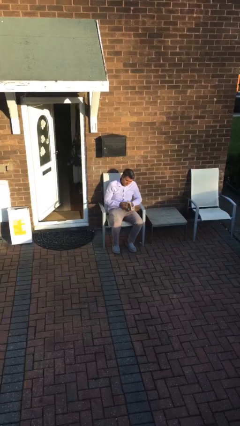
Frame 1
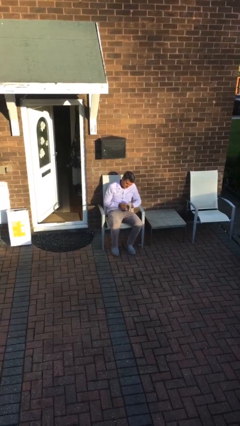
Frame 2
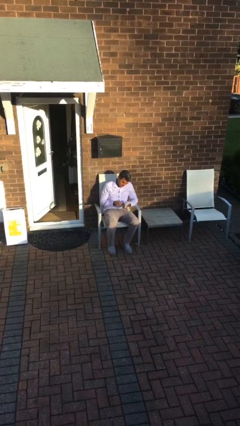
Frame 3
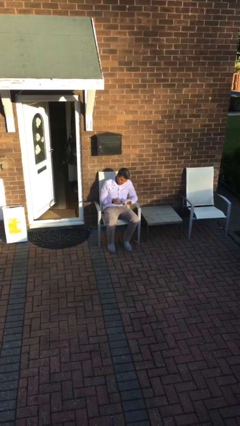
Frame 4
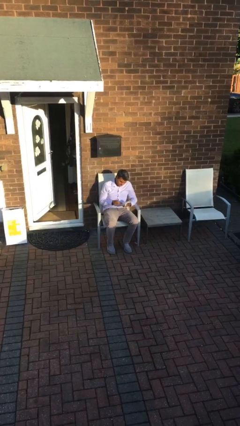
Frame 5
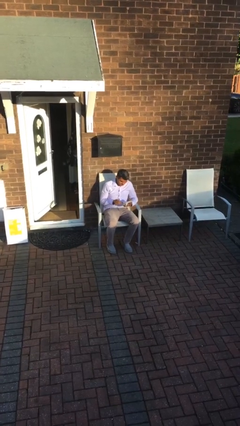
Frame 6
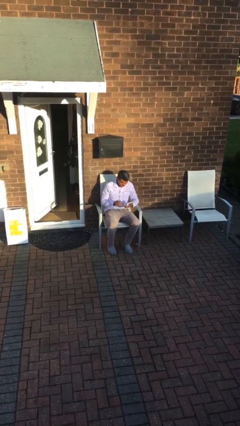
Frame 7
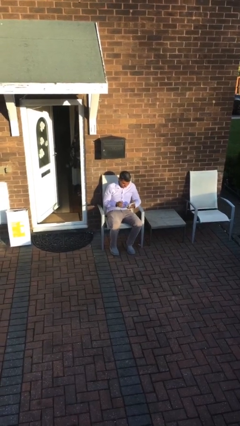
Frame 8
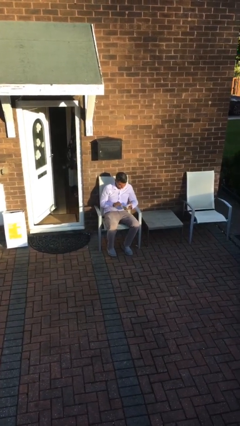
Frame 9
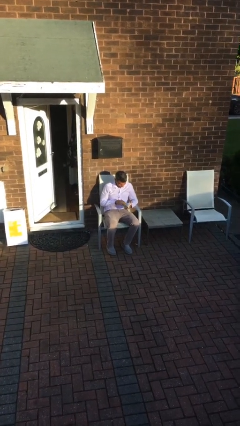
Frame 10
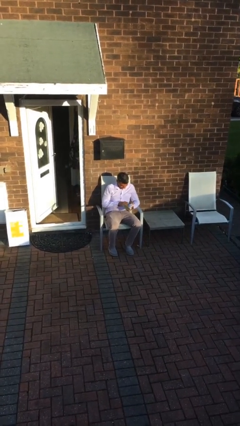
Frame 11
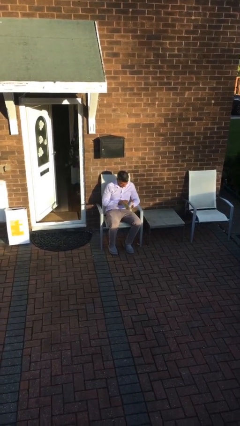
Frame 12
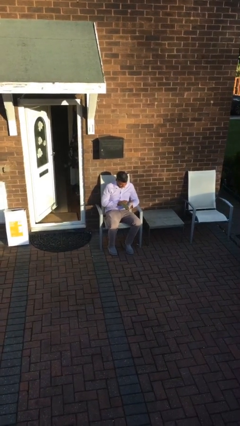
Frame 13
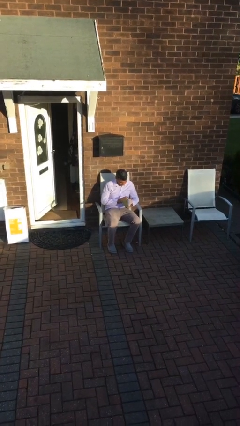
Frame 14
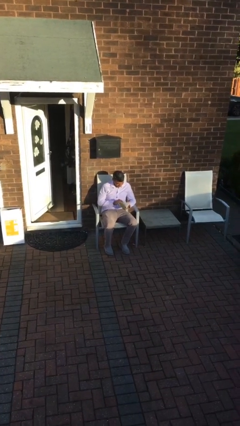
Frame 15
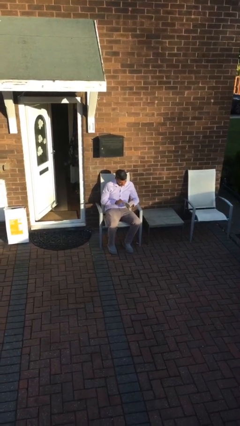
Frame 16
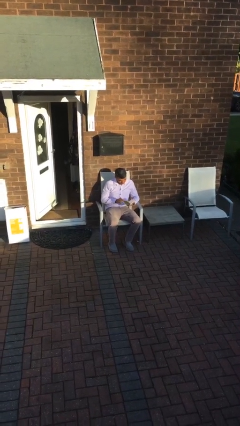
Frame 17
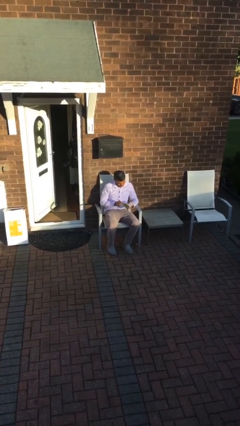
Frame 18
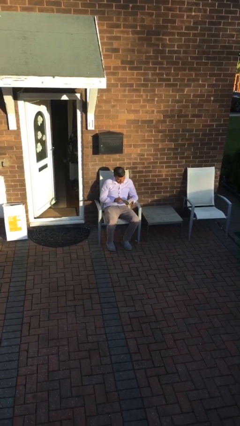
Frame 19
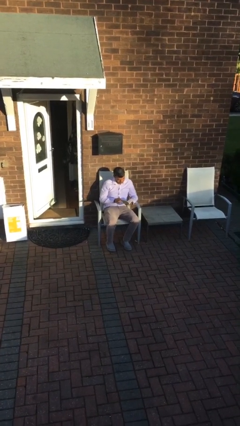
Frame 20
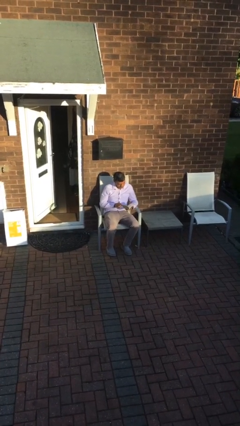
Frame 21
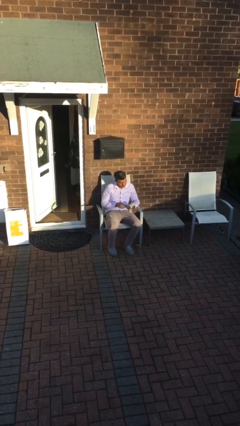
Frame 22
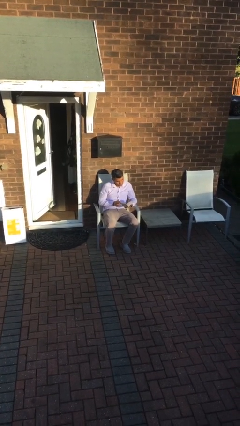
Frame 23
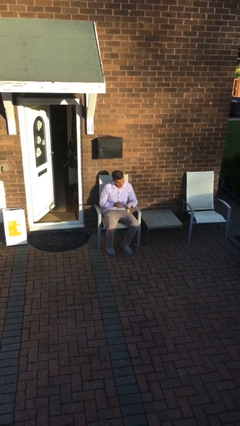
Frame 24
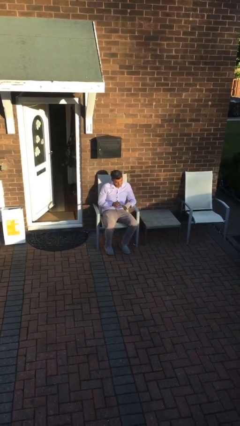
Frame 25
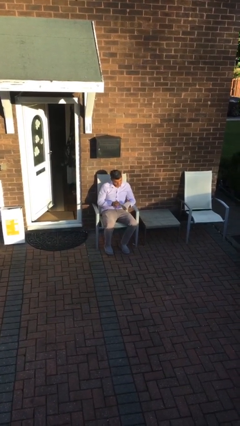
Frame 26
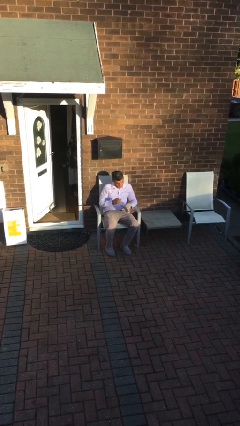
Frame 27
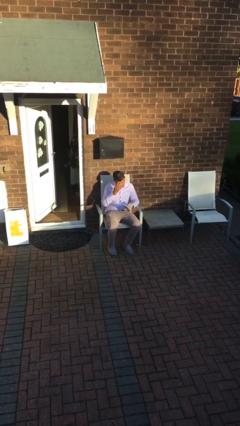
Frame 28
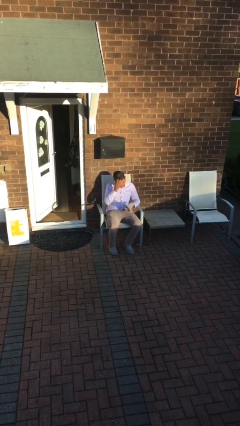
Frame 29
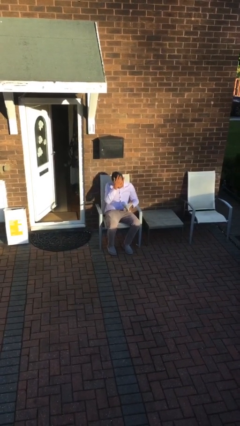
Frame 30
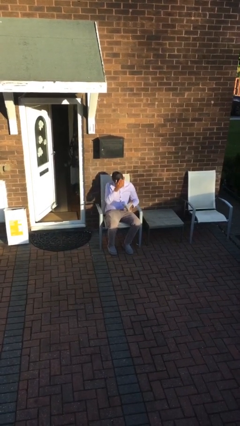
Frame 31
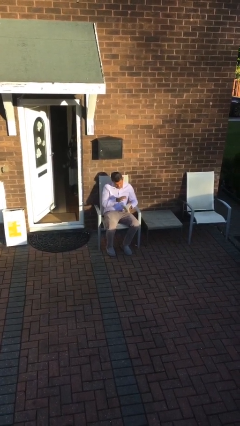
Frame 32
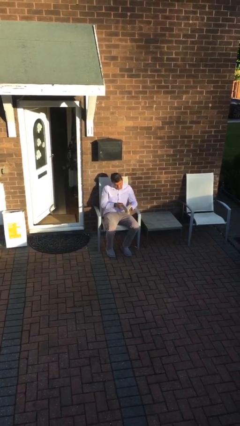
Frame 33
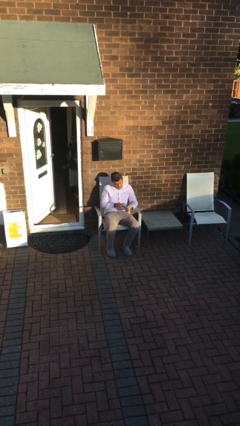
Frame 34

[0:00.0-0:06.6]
person reads document

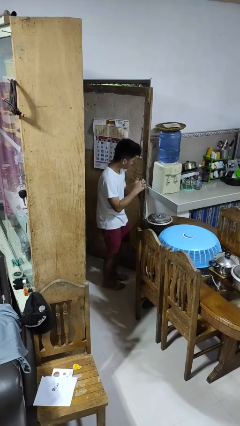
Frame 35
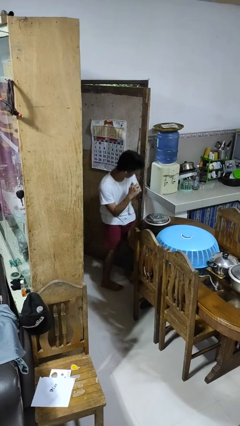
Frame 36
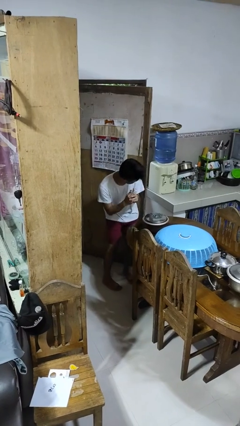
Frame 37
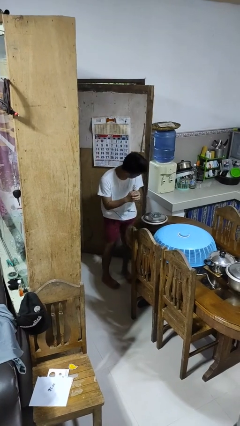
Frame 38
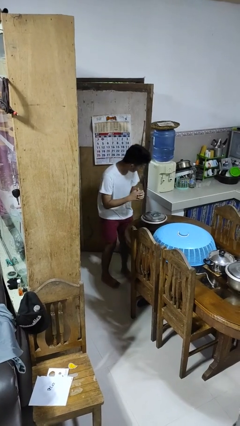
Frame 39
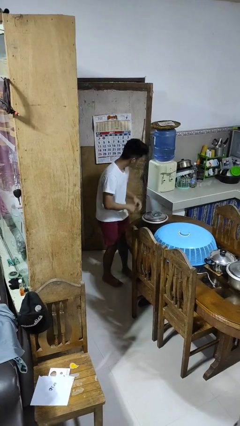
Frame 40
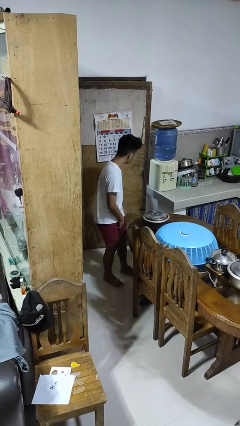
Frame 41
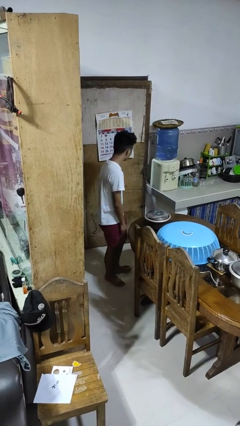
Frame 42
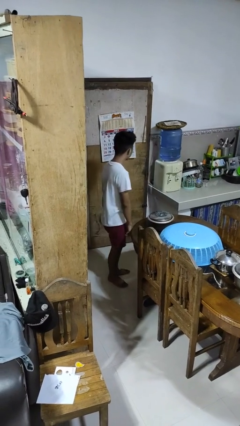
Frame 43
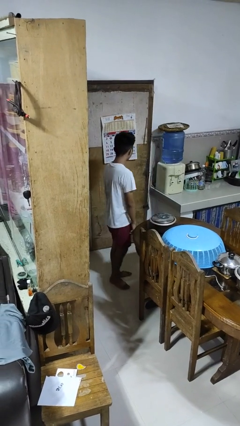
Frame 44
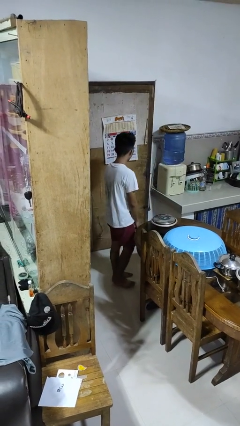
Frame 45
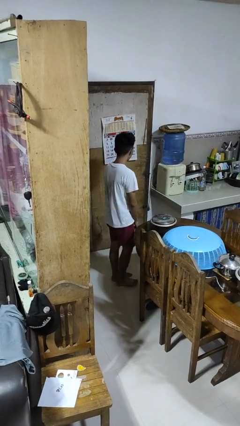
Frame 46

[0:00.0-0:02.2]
person closes door with hip

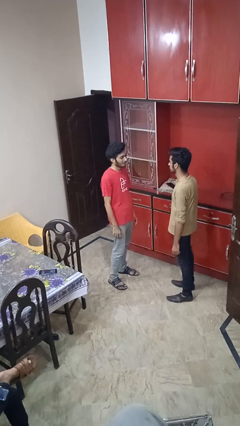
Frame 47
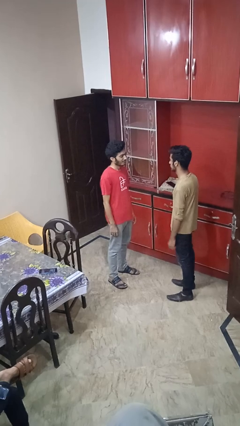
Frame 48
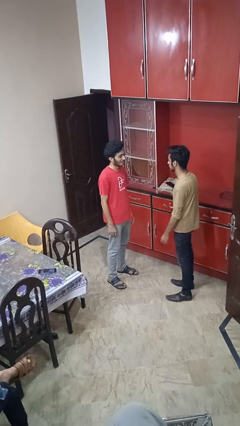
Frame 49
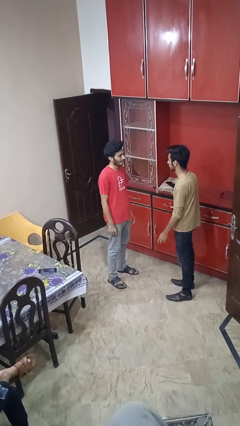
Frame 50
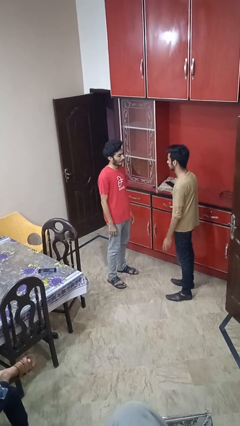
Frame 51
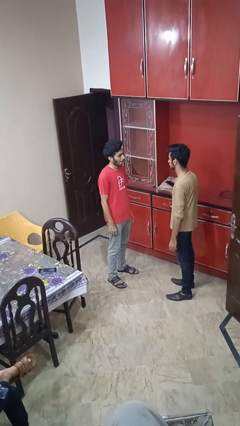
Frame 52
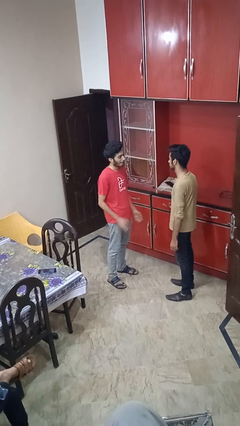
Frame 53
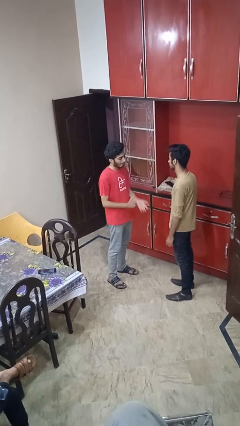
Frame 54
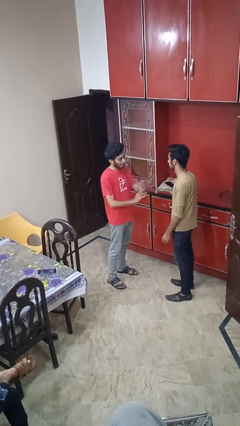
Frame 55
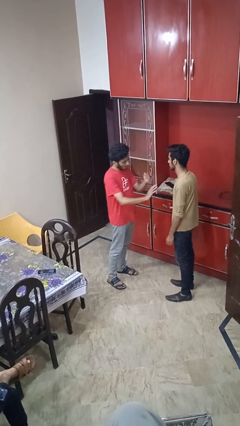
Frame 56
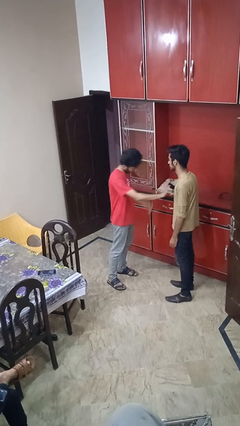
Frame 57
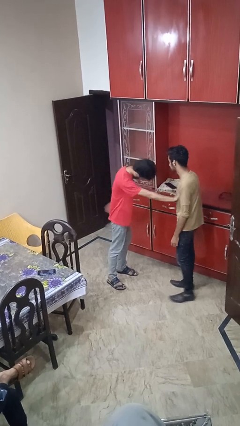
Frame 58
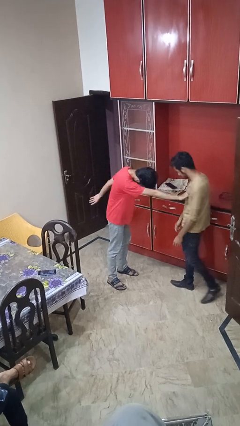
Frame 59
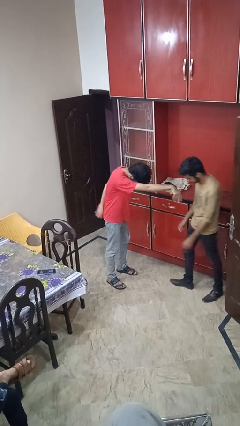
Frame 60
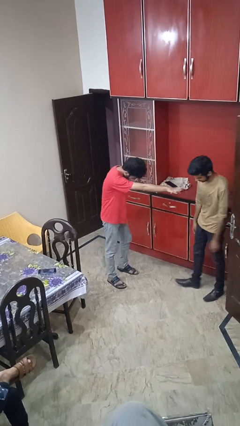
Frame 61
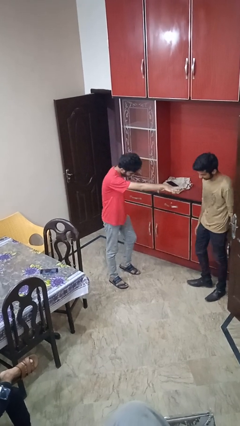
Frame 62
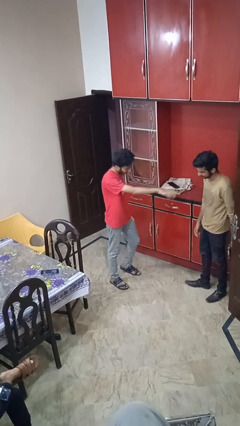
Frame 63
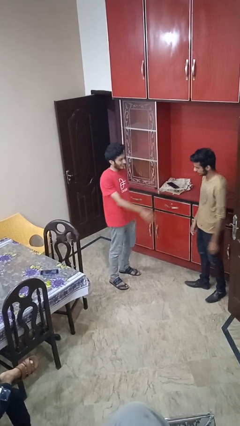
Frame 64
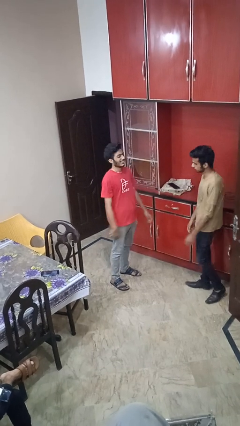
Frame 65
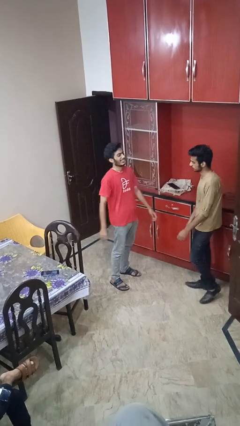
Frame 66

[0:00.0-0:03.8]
person shoves person

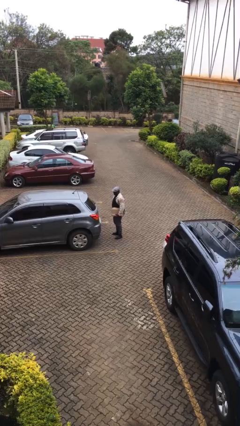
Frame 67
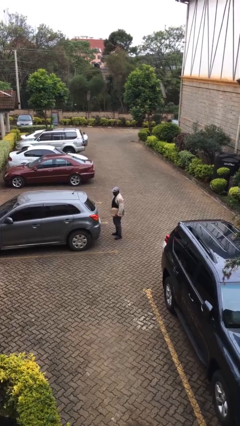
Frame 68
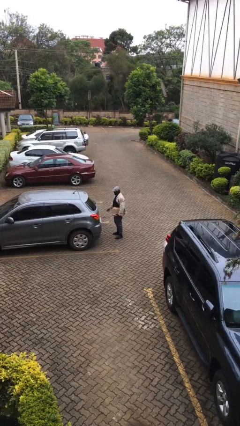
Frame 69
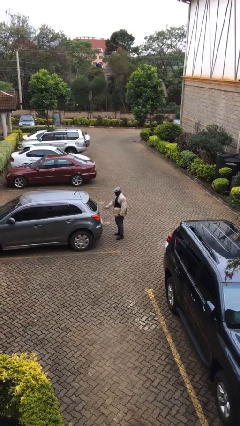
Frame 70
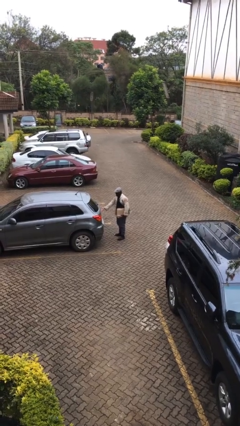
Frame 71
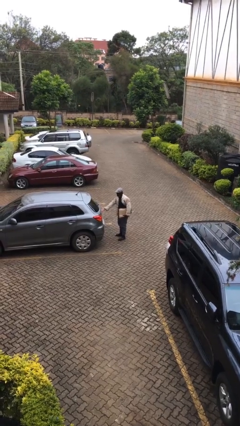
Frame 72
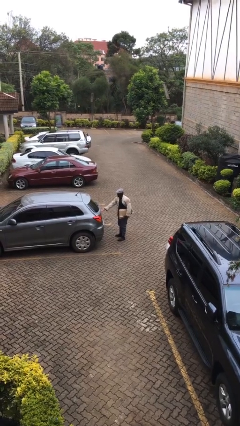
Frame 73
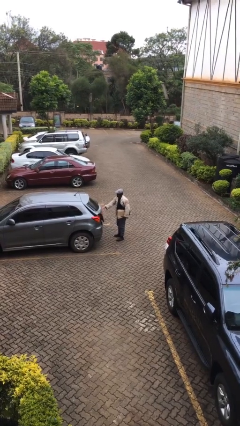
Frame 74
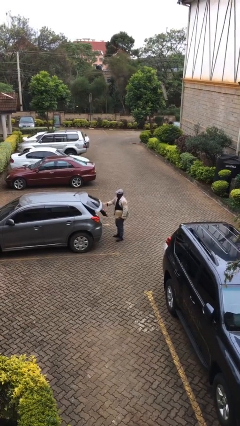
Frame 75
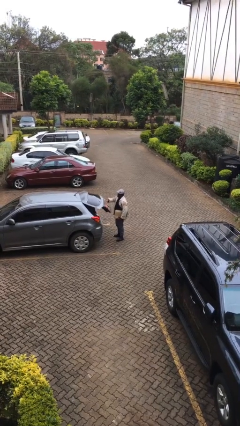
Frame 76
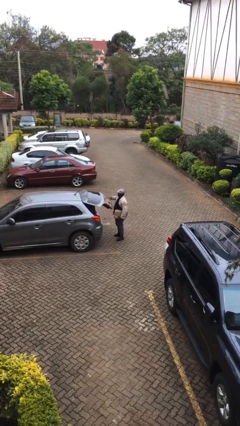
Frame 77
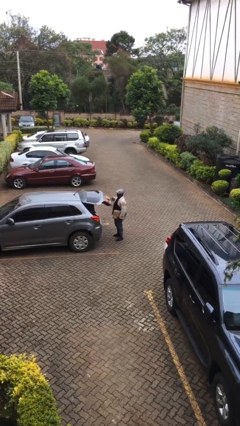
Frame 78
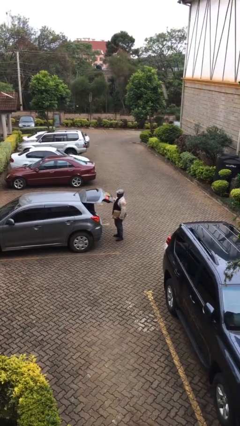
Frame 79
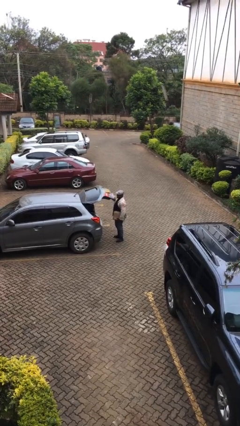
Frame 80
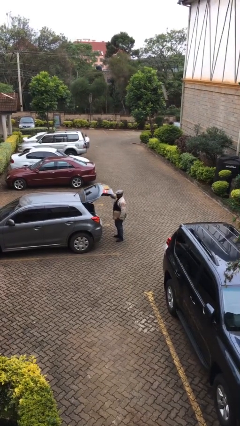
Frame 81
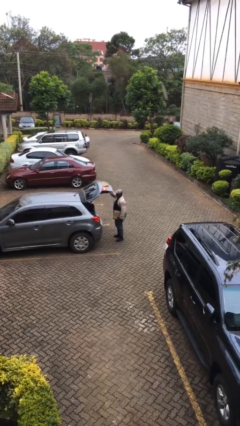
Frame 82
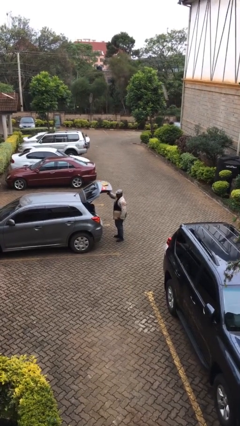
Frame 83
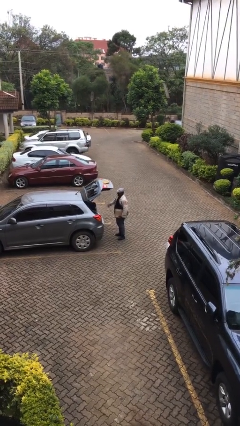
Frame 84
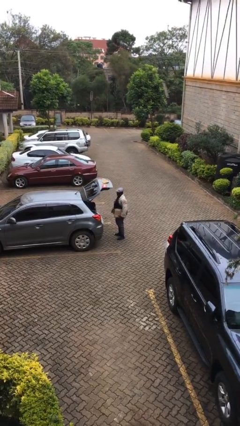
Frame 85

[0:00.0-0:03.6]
person opens car trunk

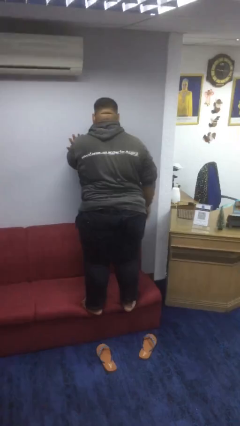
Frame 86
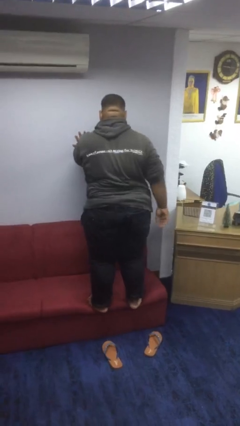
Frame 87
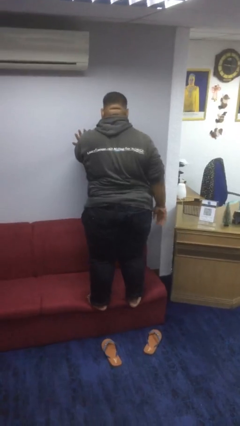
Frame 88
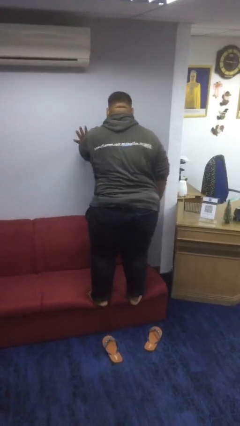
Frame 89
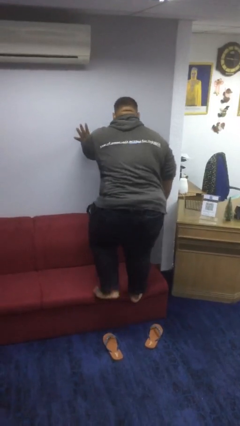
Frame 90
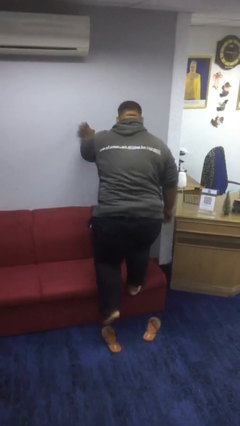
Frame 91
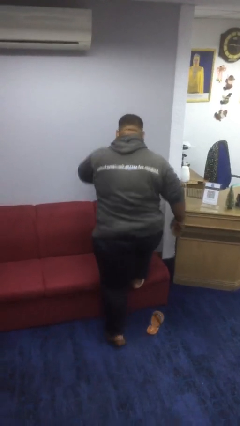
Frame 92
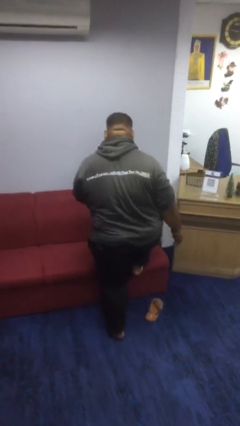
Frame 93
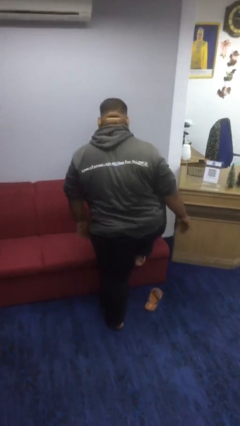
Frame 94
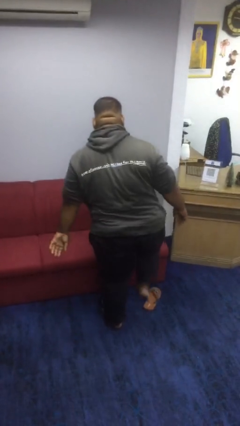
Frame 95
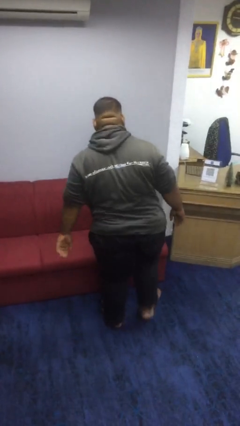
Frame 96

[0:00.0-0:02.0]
person climbs off couch
